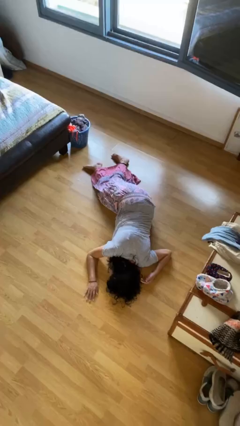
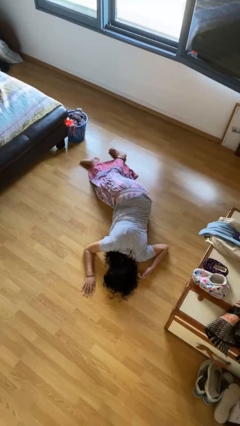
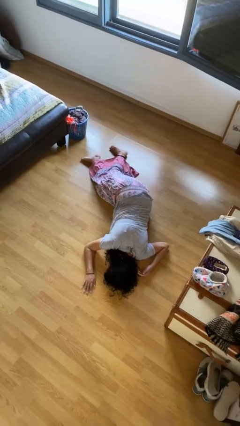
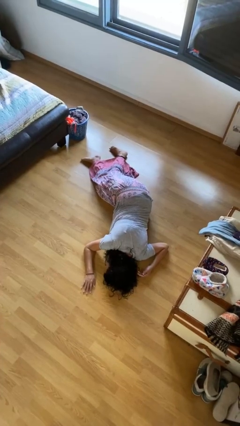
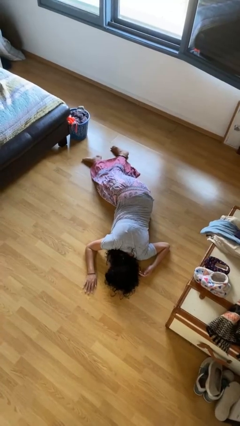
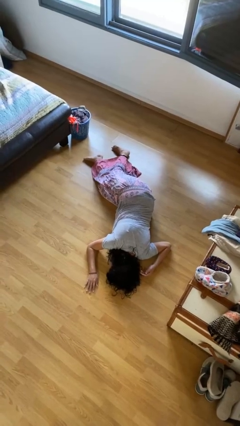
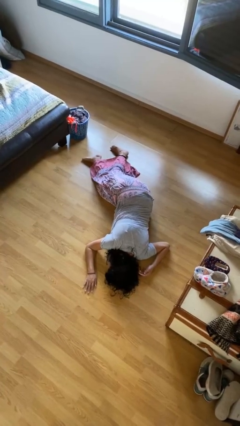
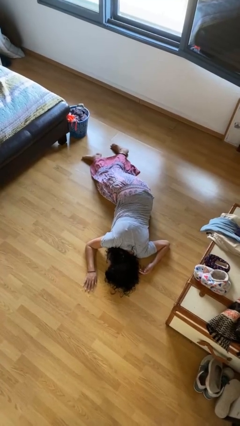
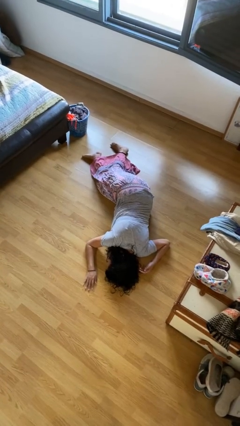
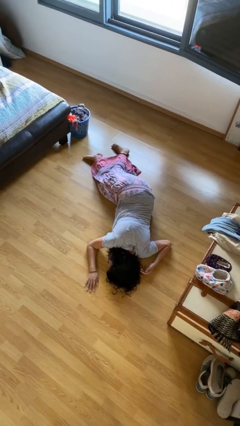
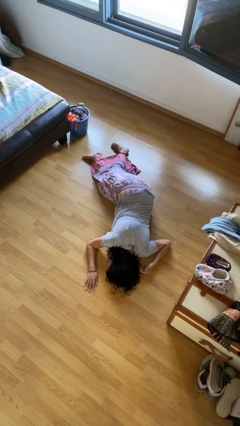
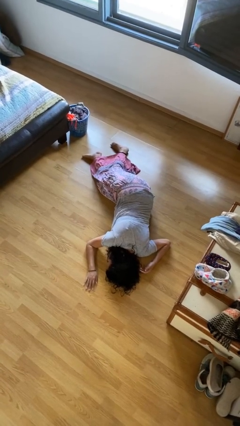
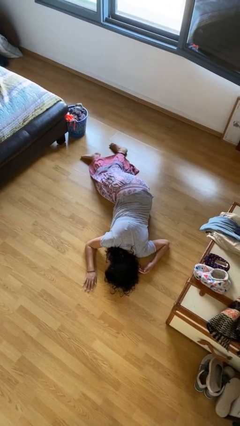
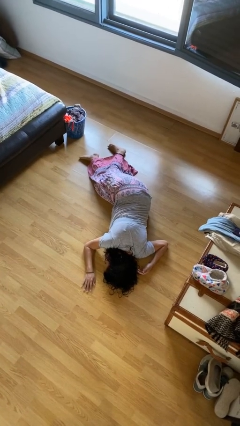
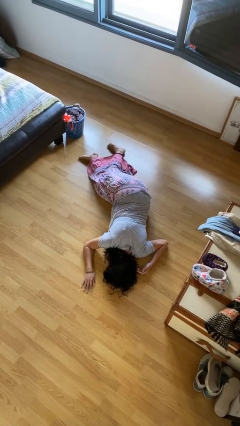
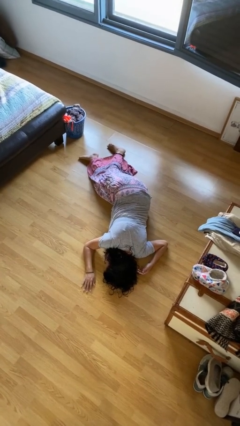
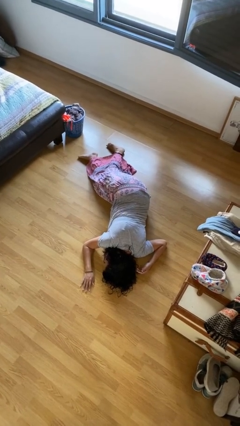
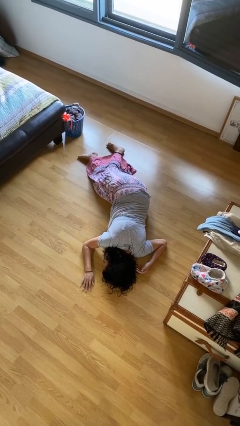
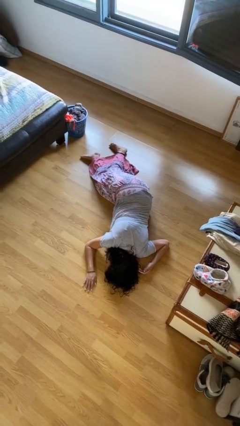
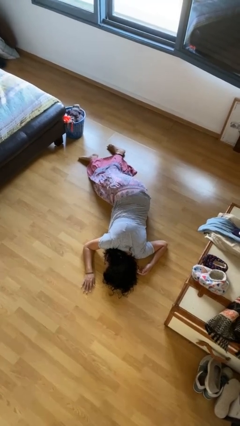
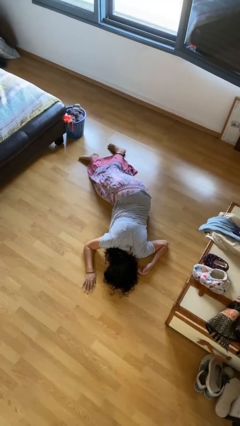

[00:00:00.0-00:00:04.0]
person lies down on floor

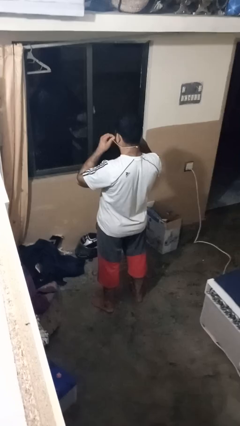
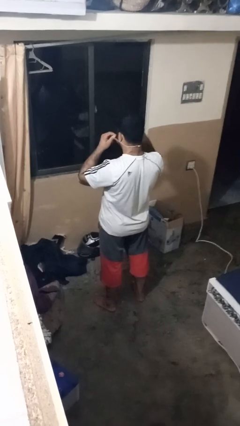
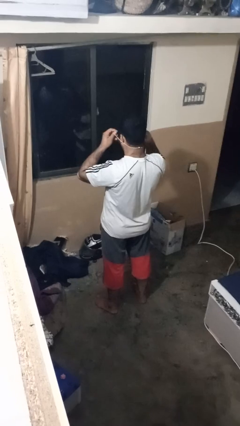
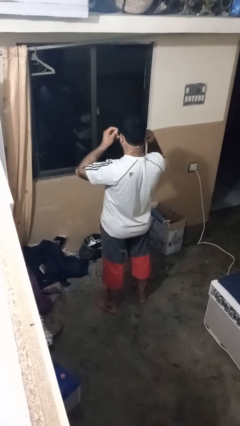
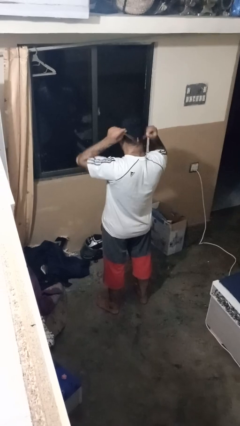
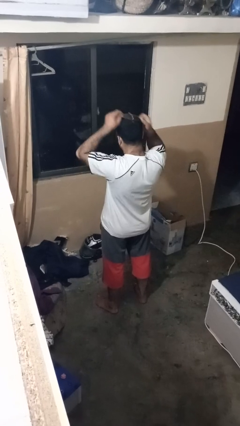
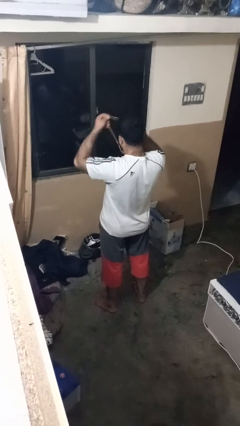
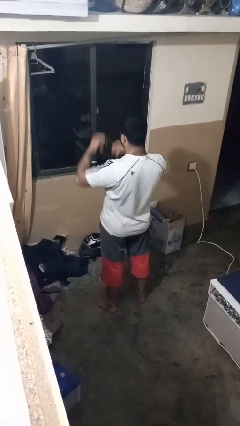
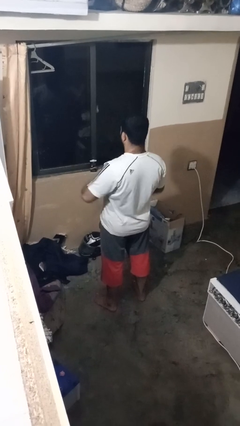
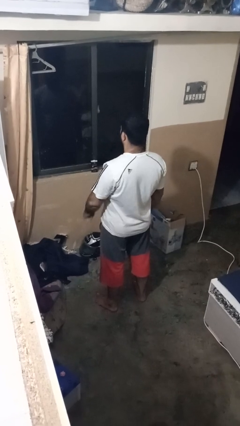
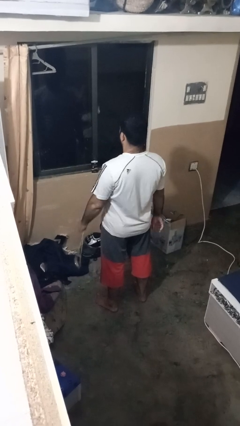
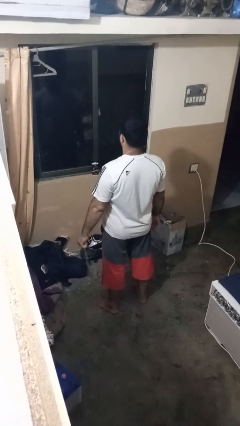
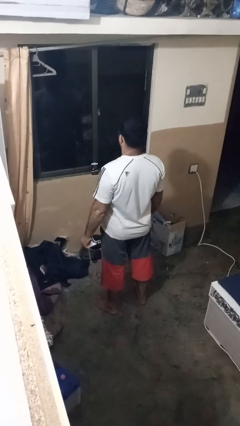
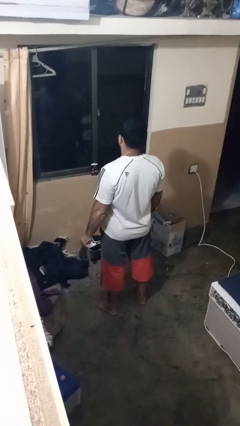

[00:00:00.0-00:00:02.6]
person takes off necklace

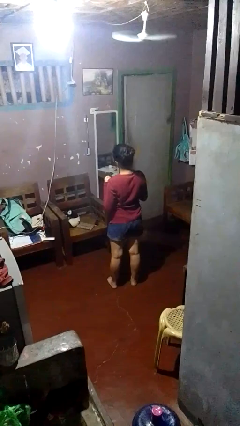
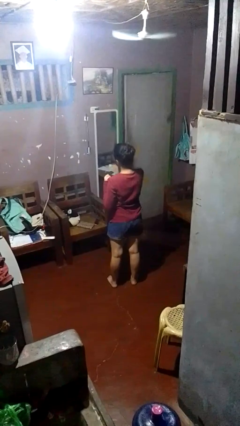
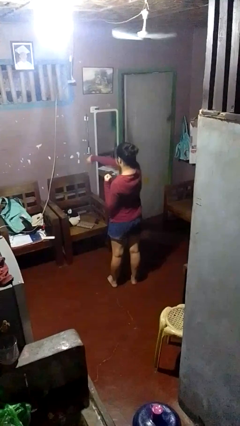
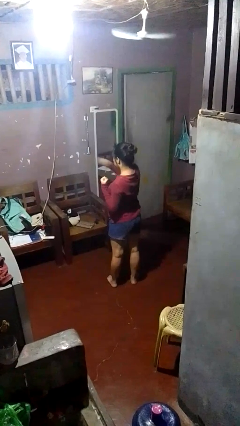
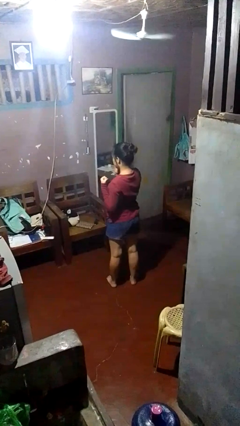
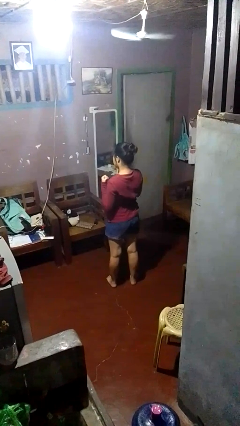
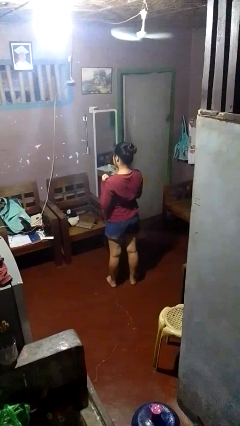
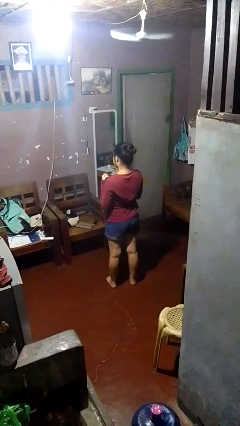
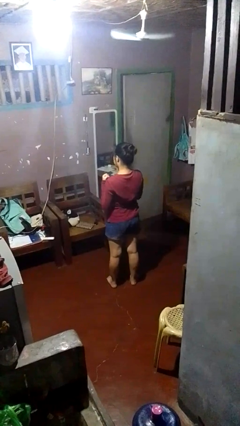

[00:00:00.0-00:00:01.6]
person punches

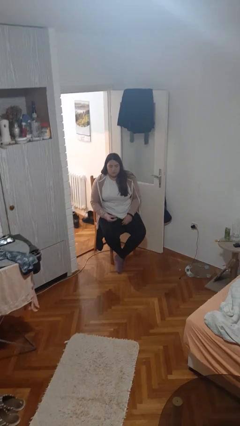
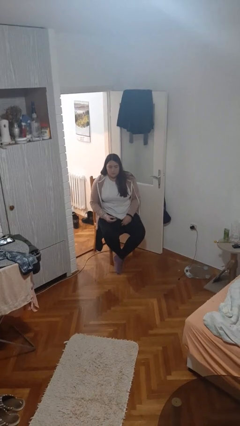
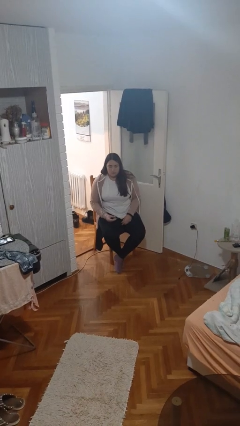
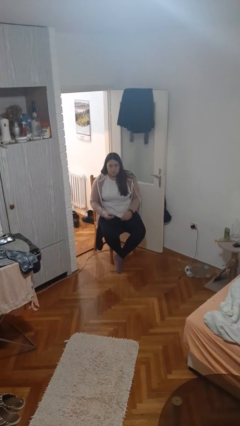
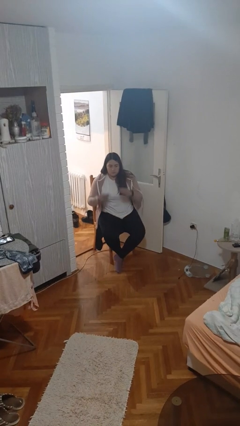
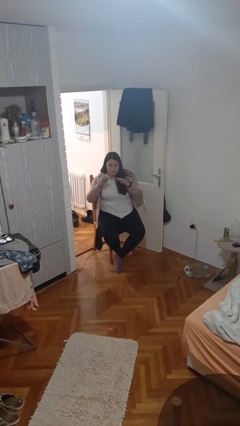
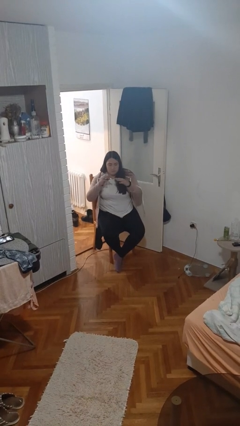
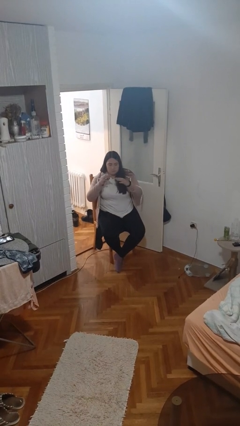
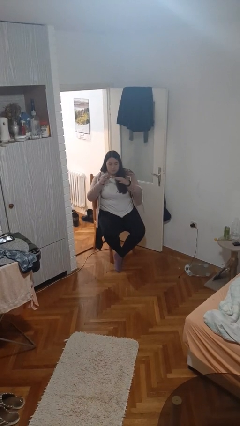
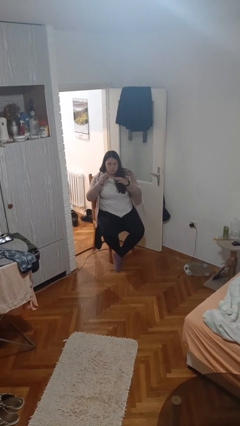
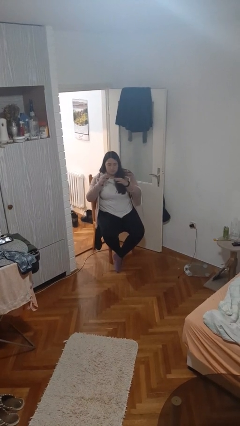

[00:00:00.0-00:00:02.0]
person clips fingernails

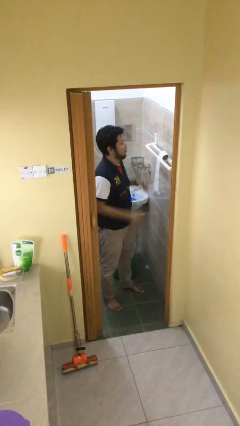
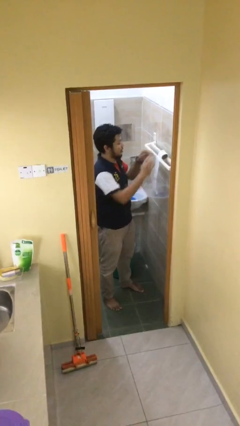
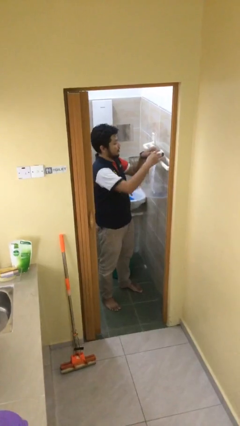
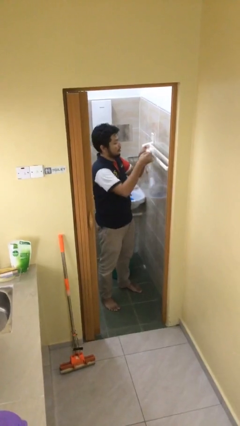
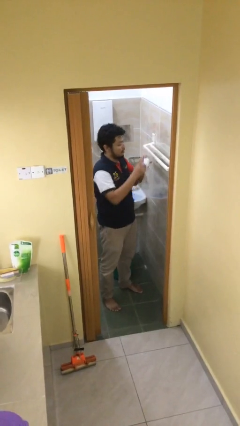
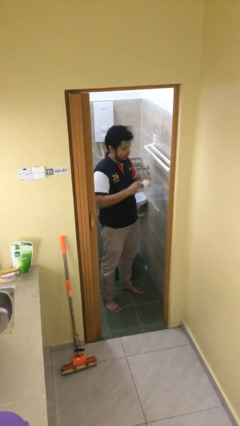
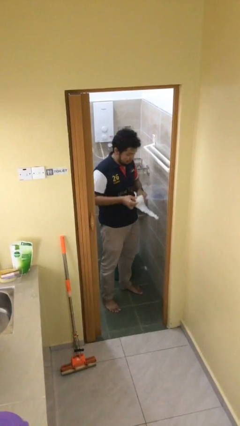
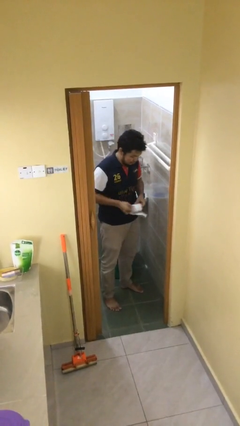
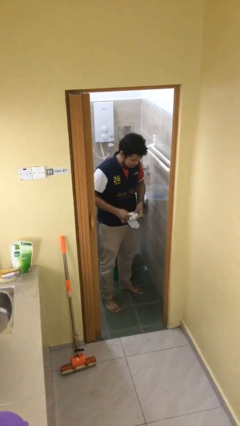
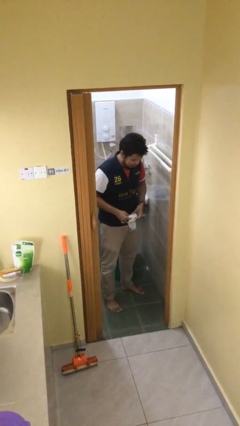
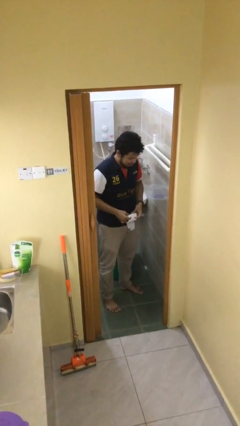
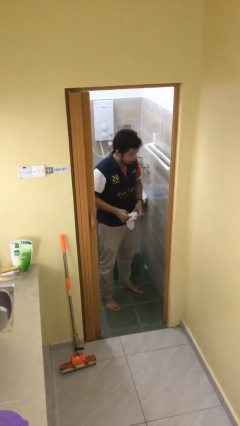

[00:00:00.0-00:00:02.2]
person picks up object from countertop

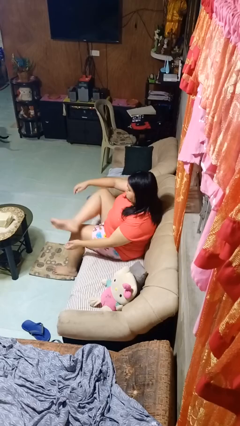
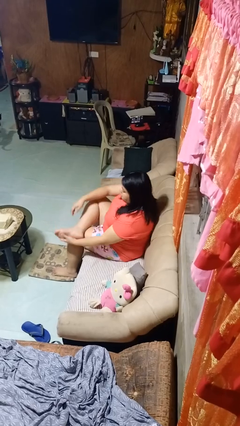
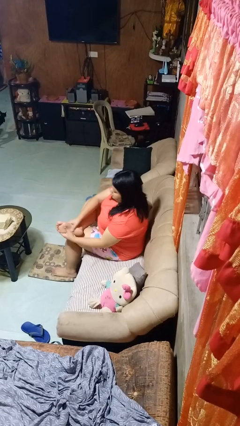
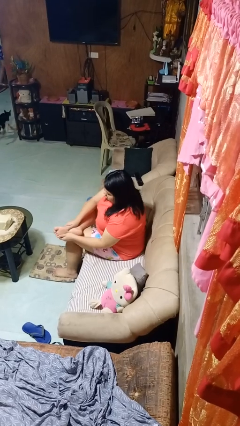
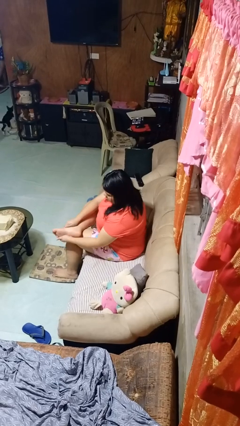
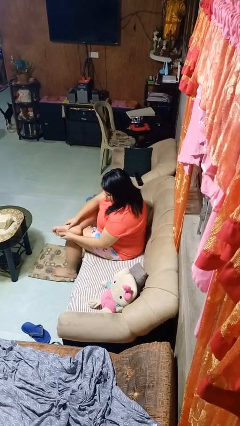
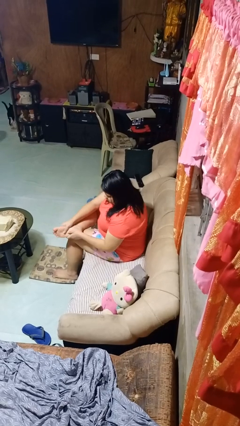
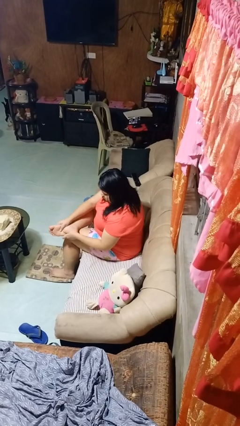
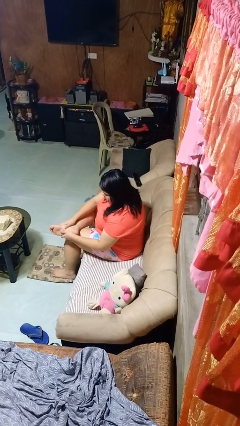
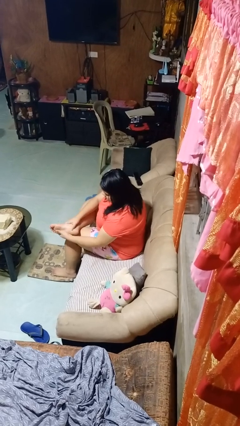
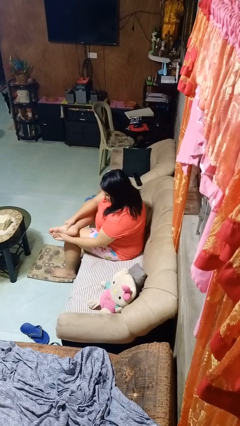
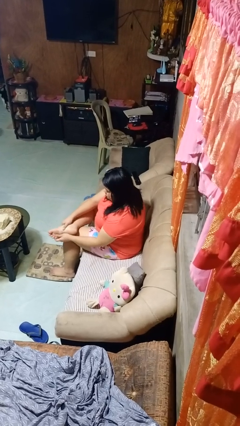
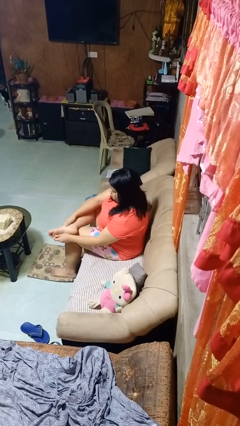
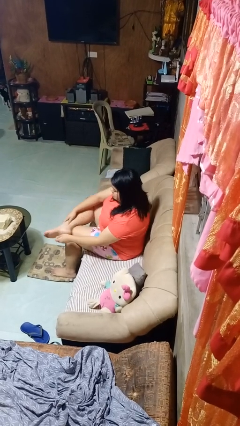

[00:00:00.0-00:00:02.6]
person rubs foot

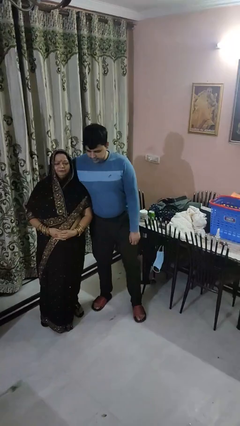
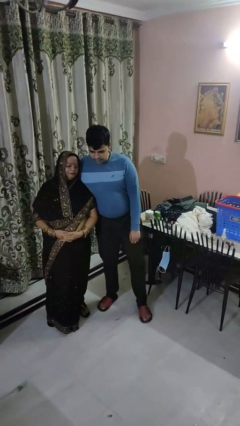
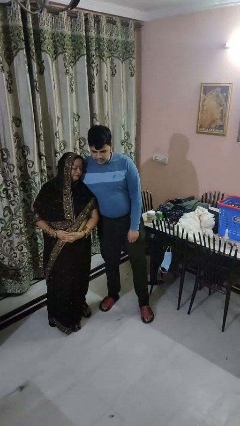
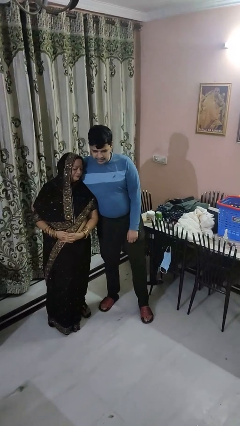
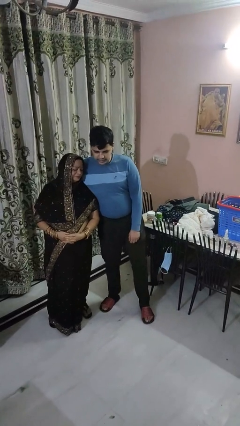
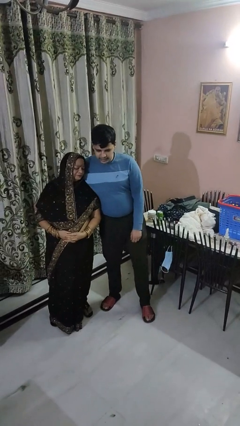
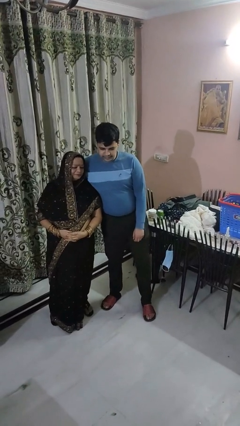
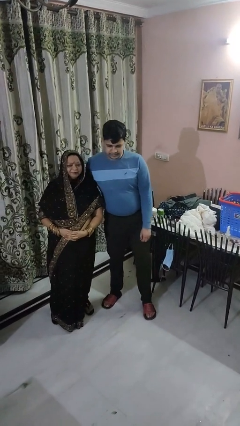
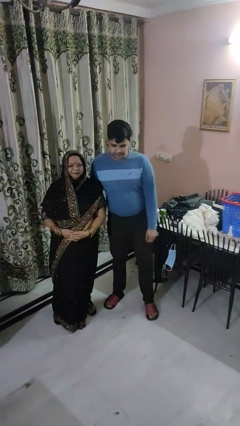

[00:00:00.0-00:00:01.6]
person hugs person from side

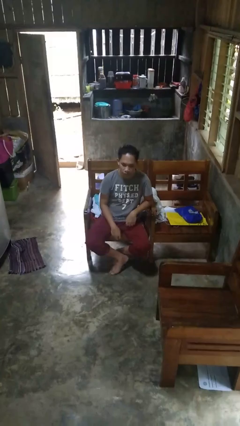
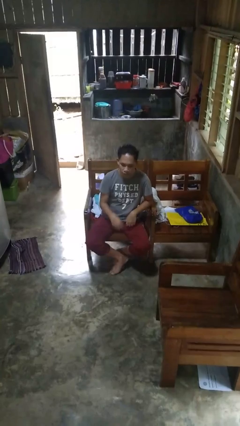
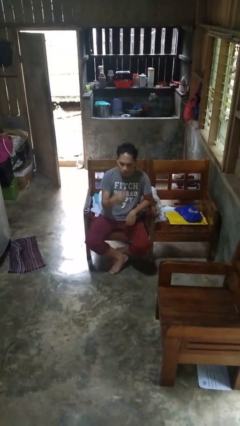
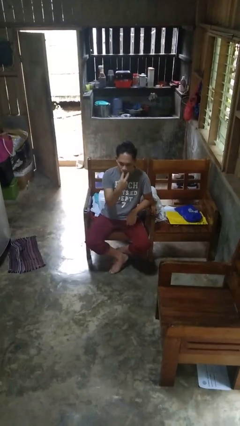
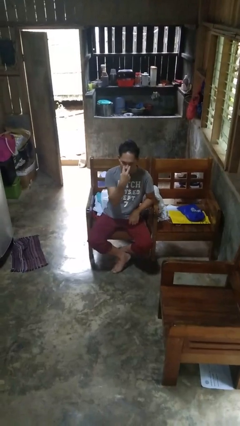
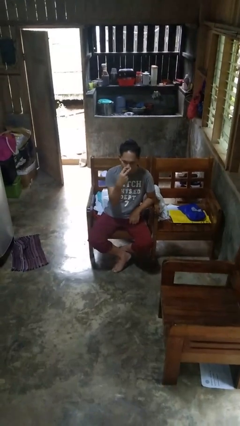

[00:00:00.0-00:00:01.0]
person gestures watch closely
